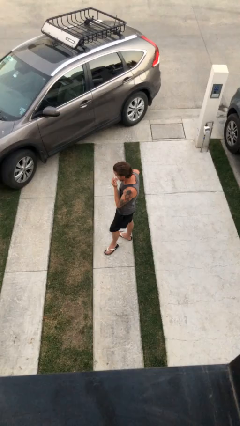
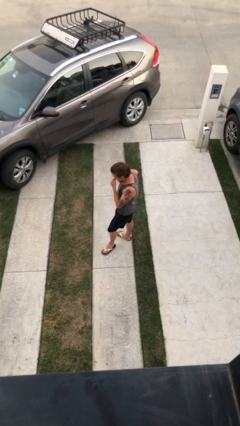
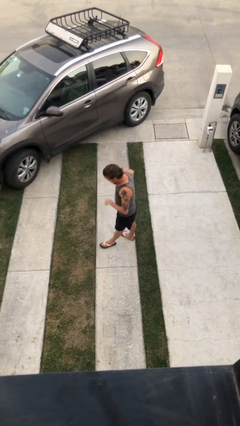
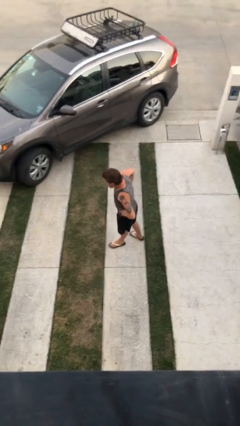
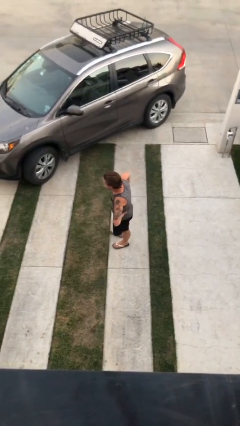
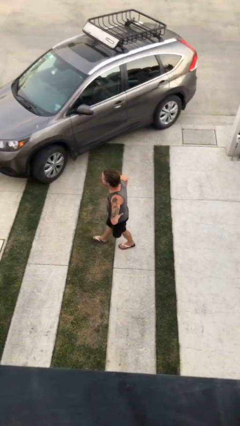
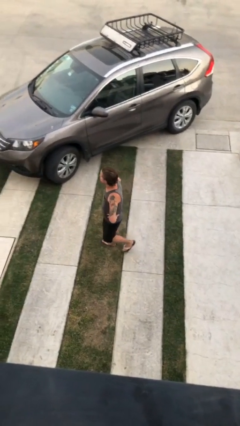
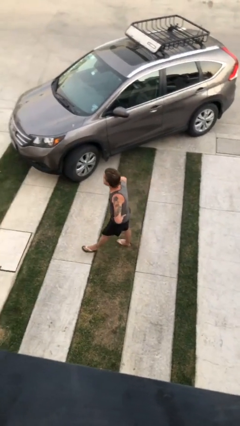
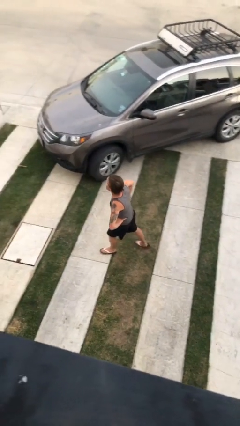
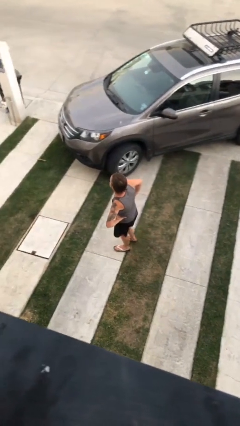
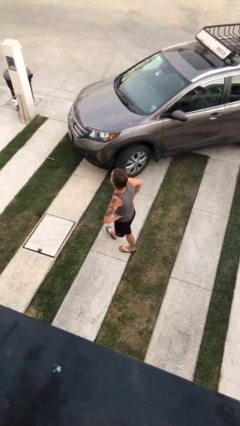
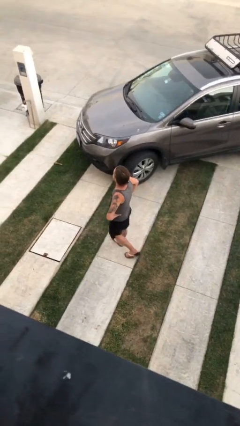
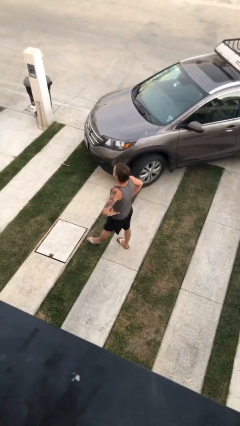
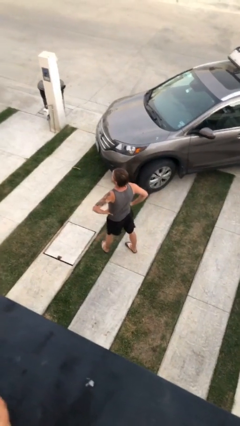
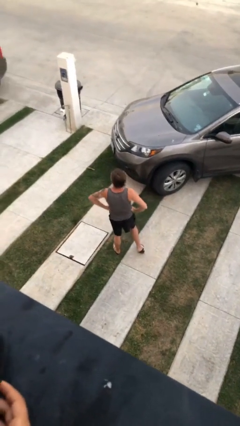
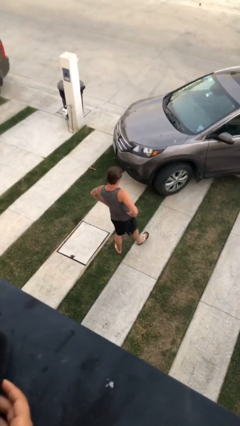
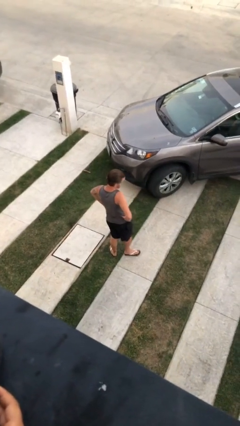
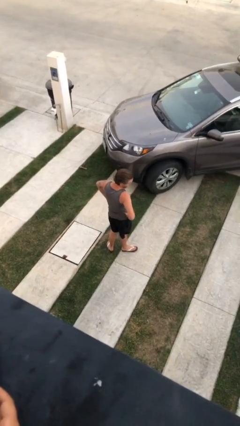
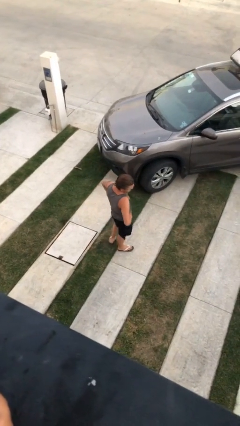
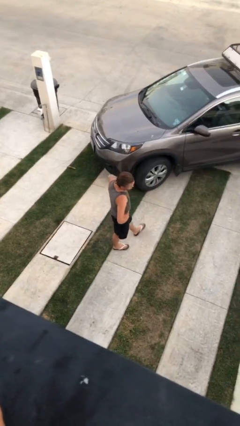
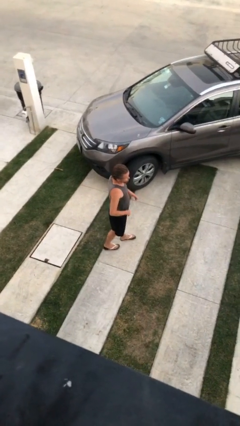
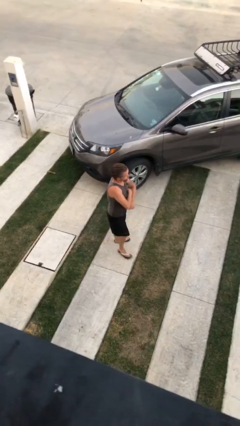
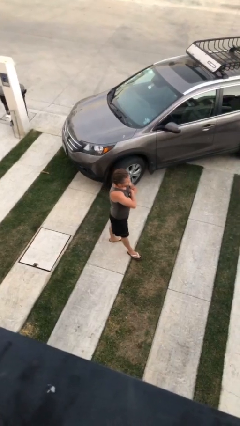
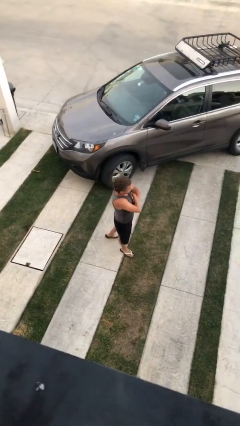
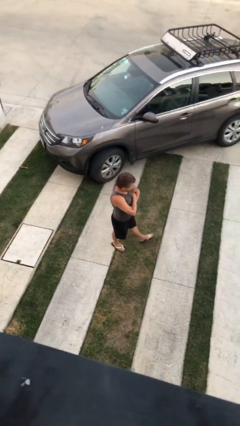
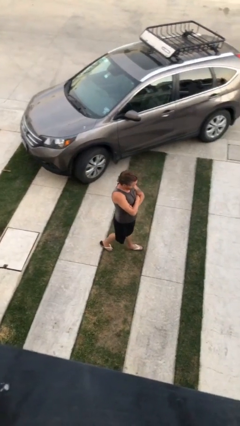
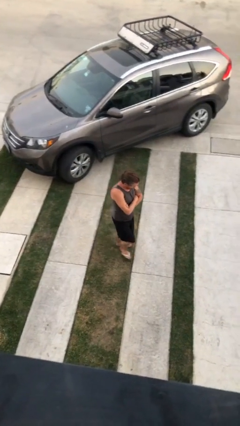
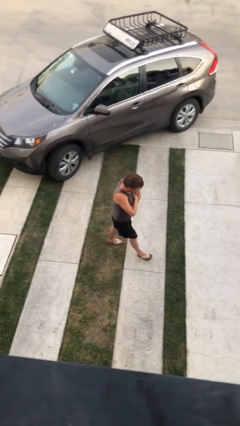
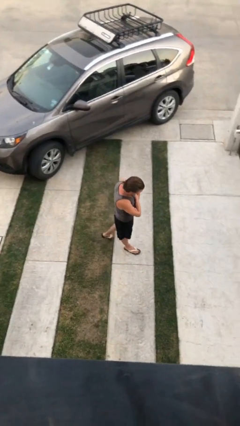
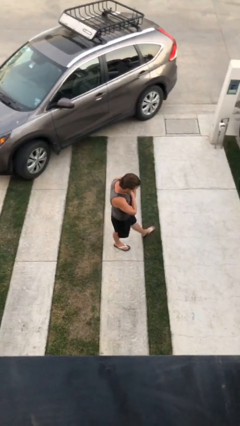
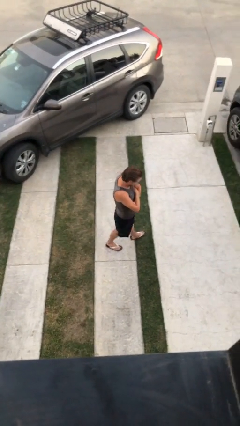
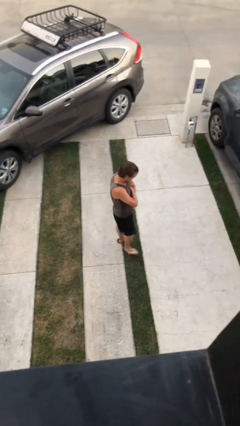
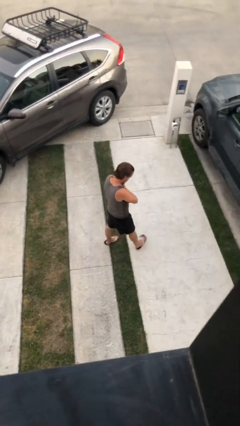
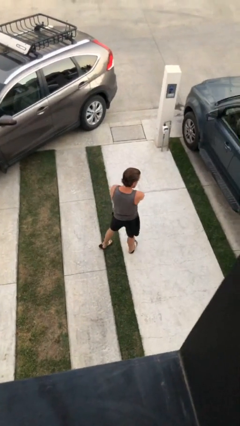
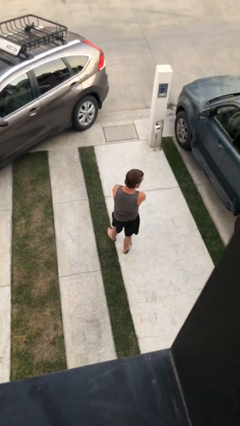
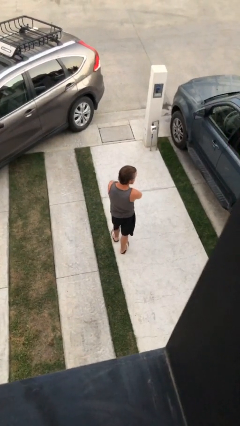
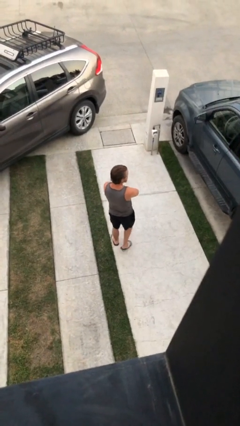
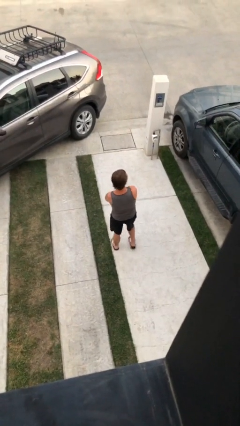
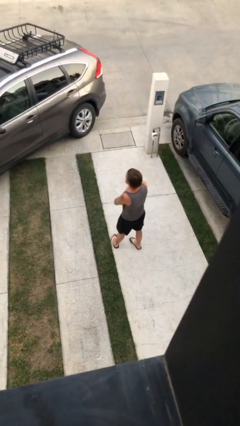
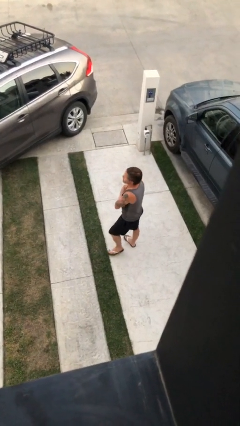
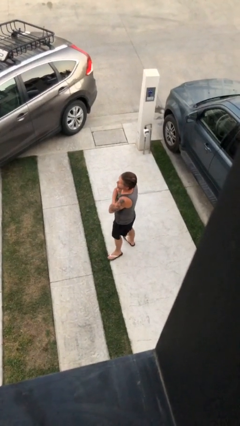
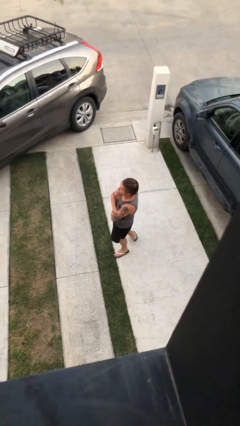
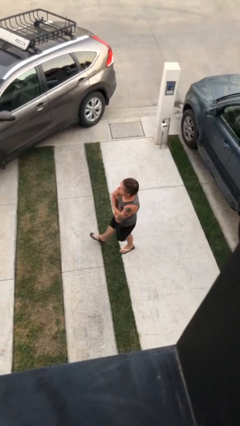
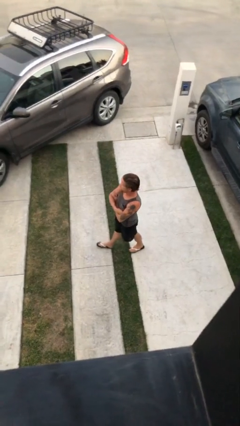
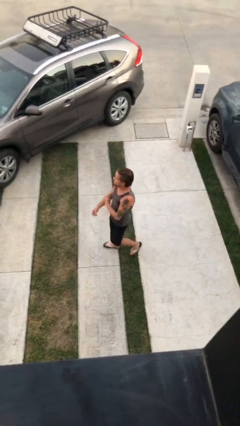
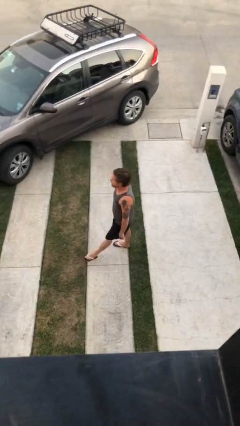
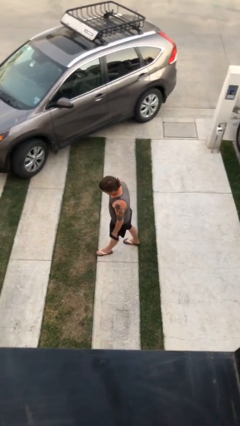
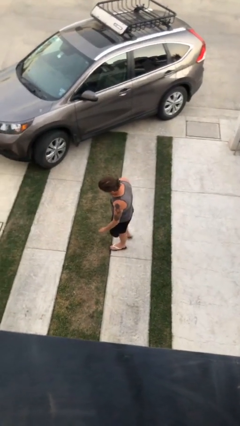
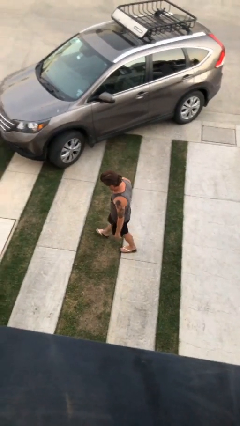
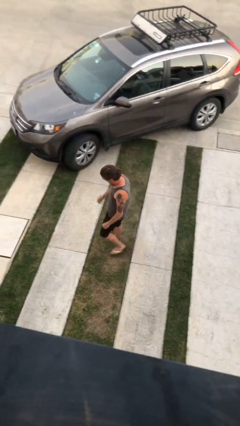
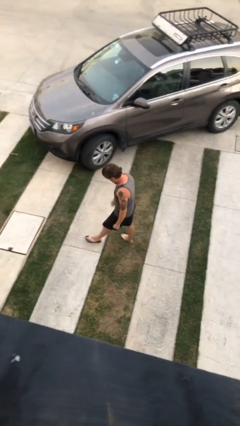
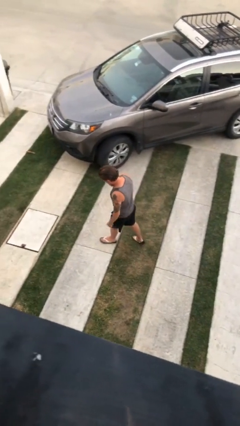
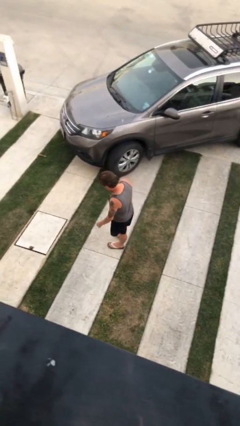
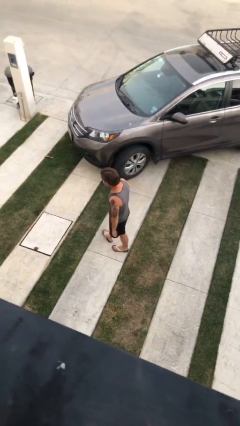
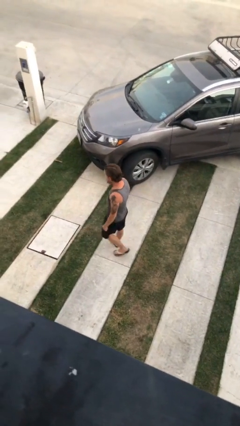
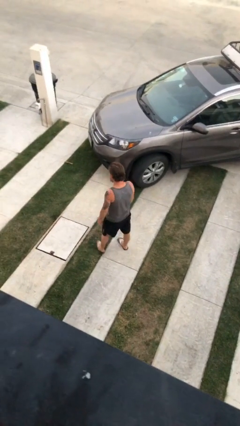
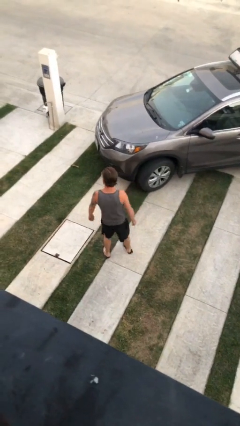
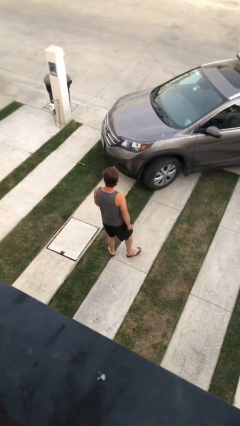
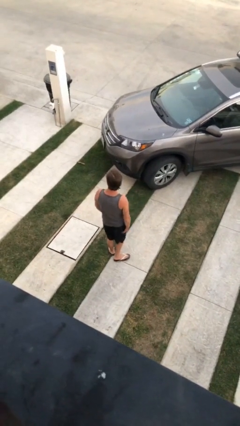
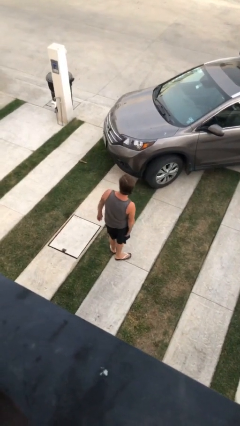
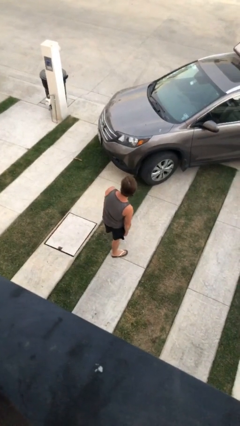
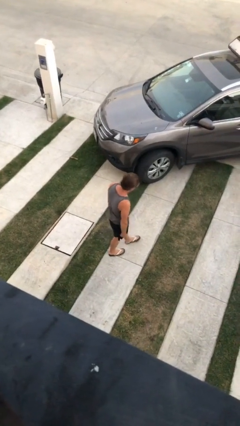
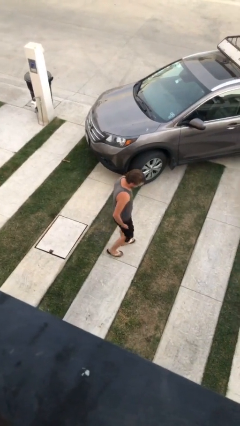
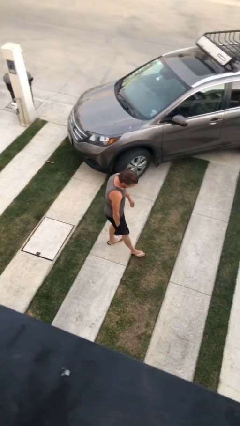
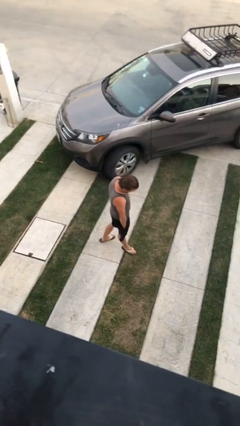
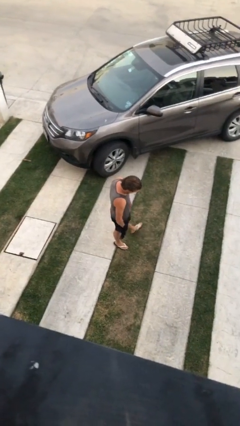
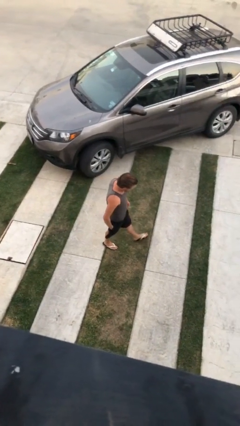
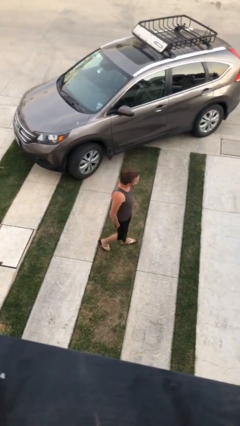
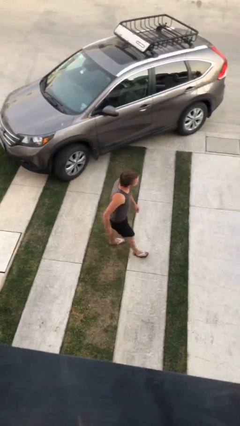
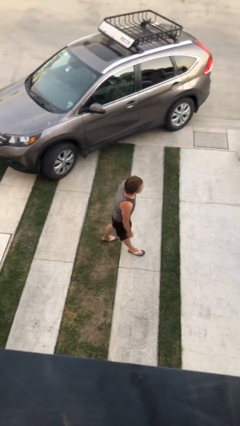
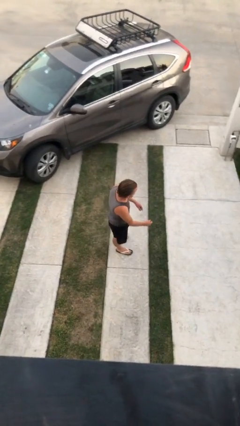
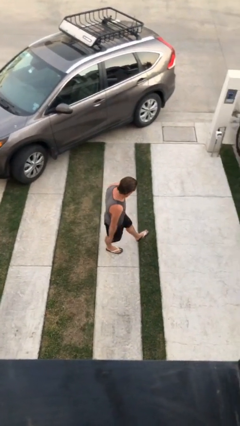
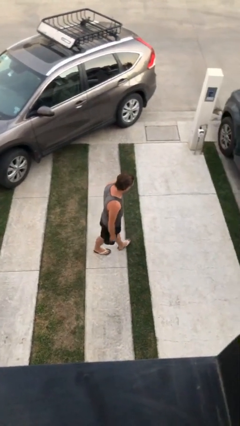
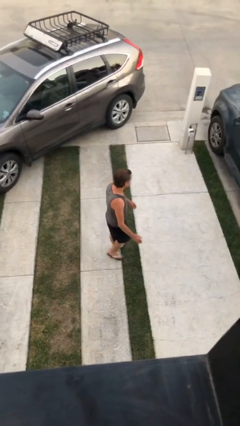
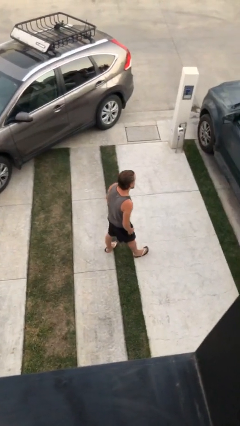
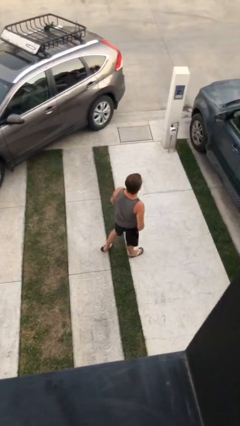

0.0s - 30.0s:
person walks

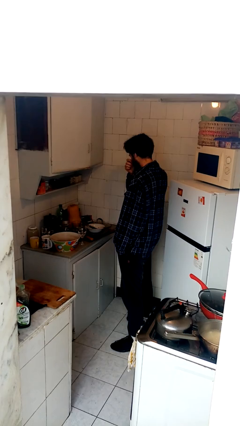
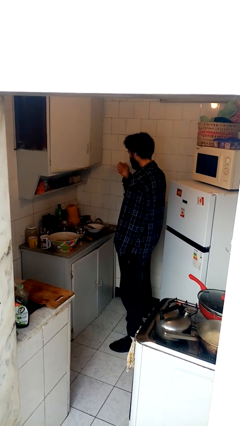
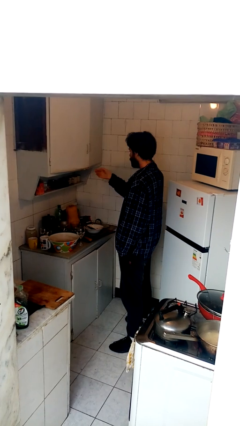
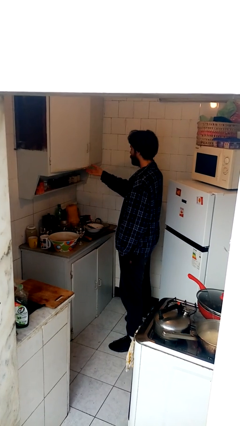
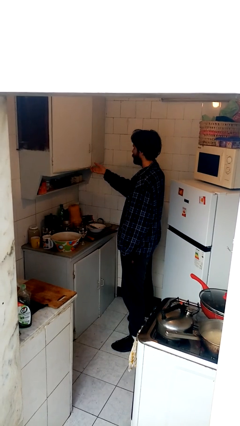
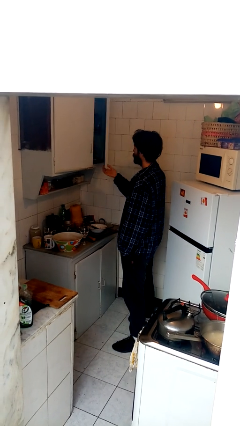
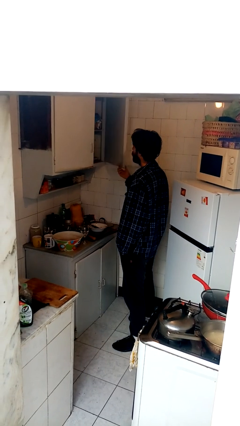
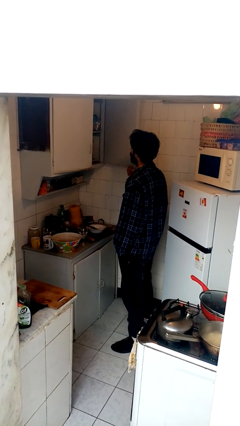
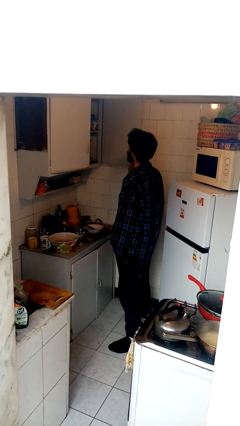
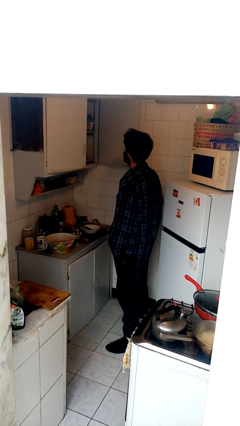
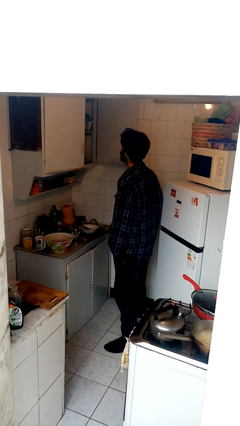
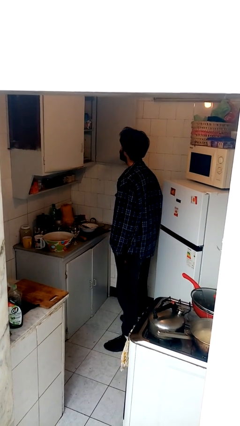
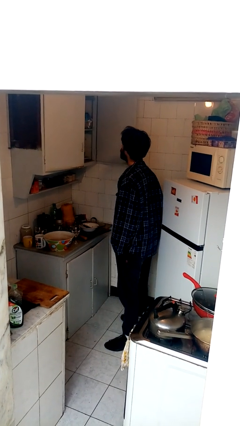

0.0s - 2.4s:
person opens cabinet

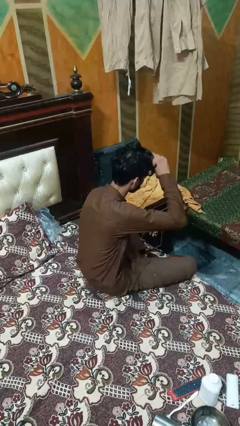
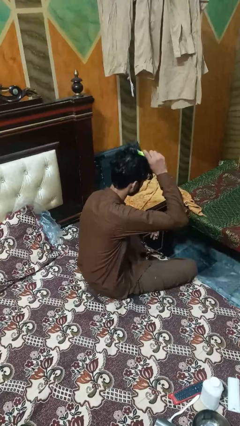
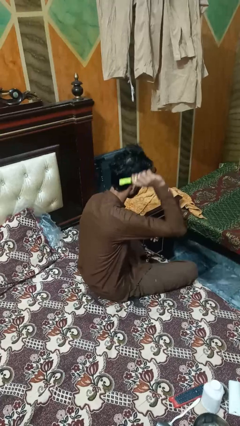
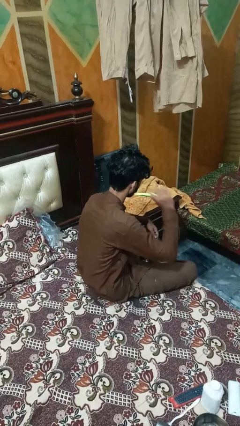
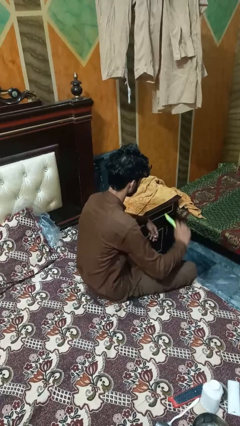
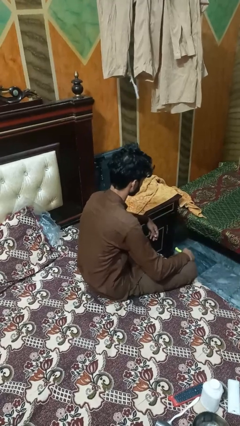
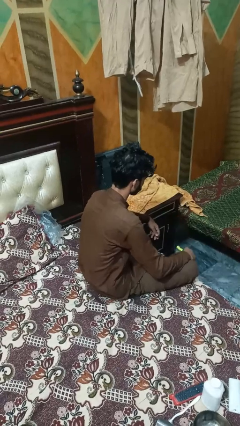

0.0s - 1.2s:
person brushes hair
